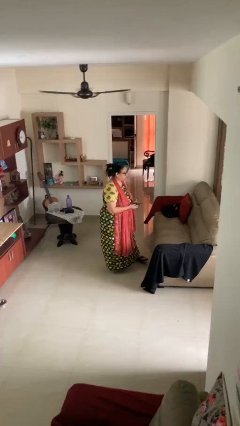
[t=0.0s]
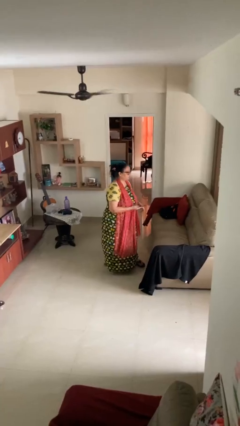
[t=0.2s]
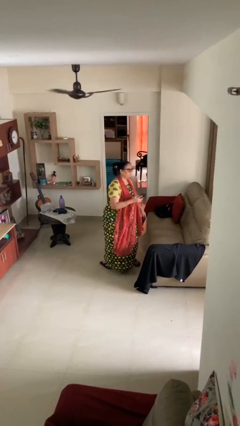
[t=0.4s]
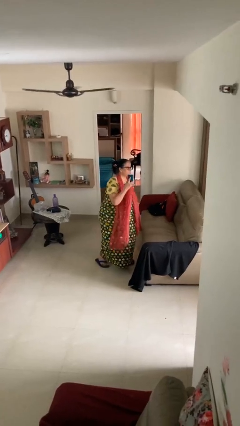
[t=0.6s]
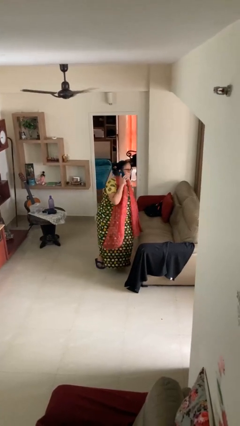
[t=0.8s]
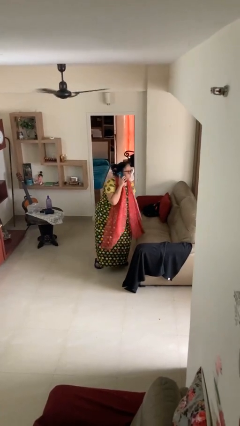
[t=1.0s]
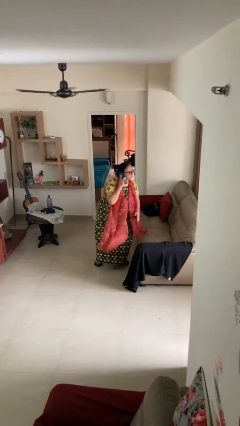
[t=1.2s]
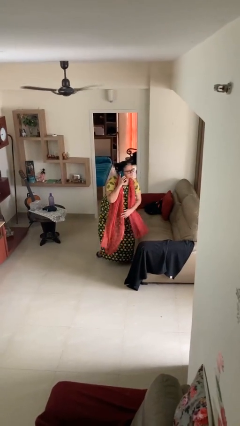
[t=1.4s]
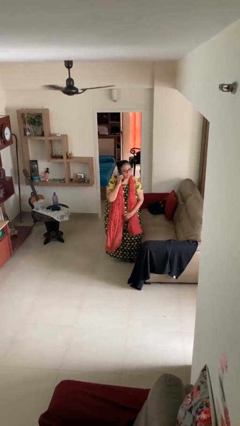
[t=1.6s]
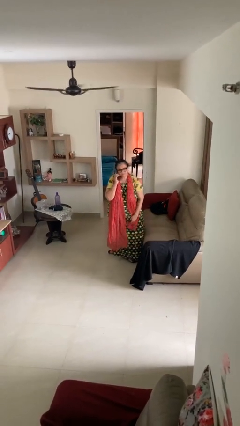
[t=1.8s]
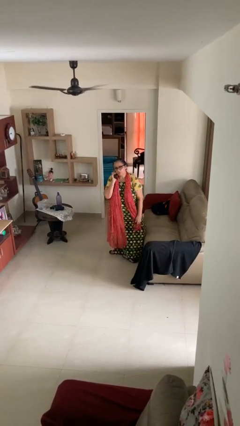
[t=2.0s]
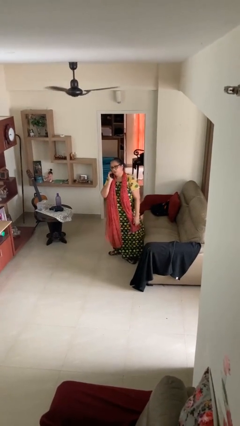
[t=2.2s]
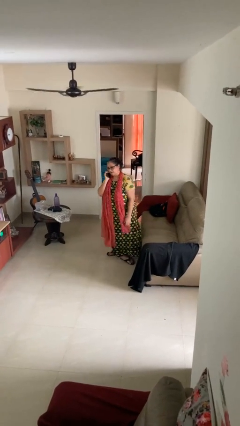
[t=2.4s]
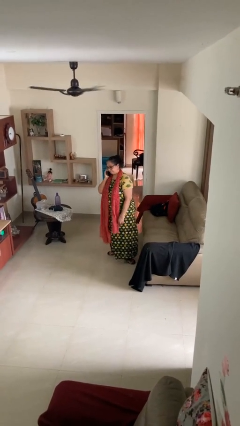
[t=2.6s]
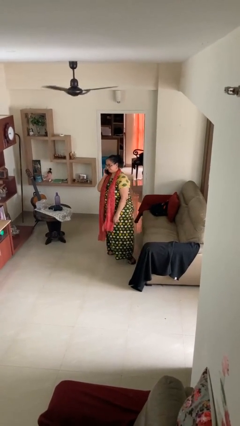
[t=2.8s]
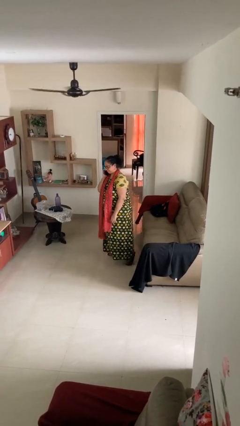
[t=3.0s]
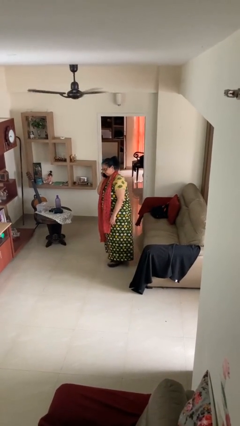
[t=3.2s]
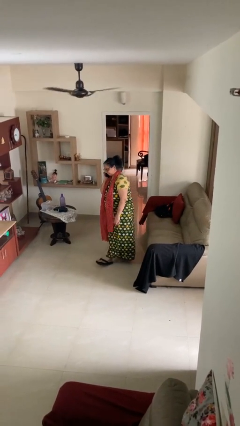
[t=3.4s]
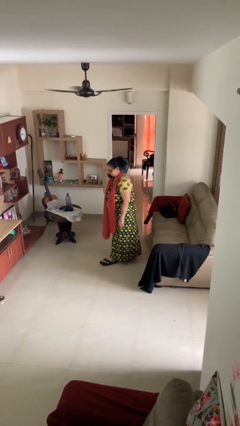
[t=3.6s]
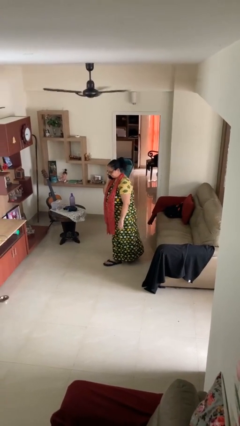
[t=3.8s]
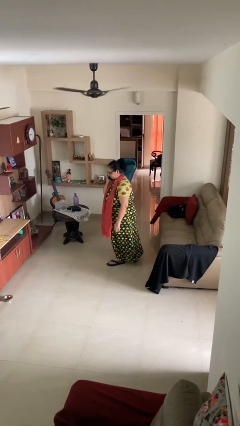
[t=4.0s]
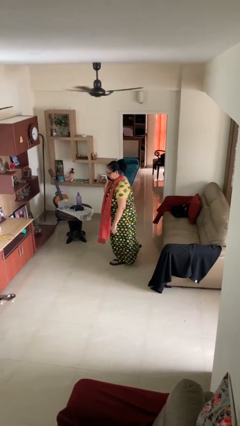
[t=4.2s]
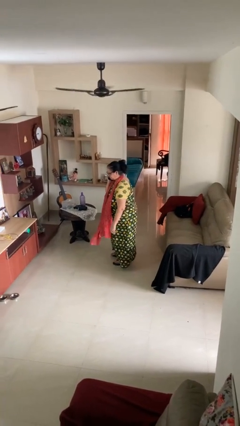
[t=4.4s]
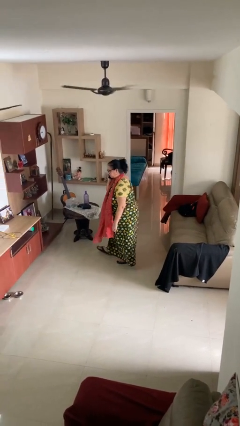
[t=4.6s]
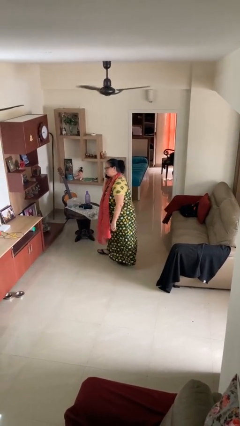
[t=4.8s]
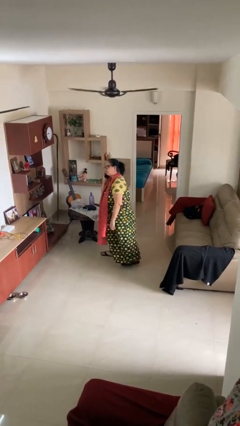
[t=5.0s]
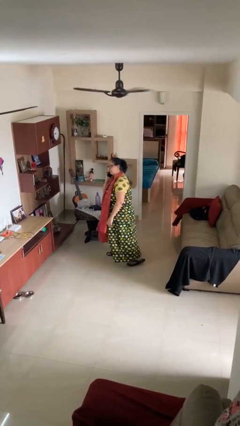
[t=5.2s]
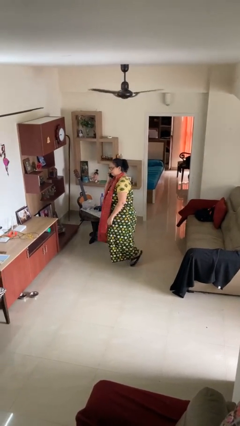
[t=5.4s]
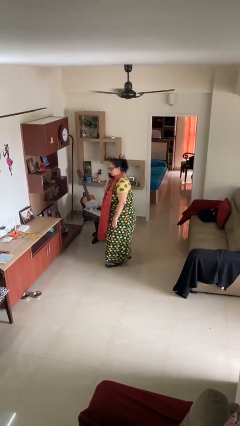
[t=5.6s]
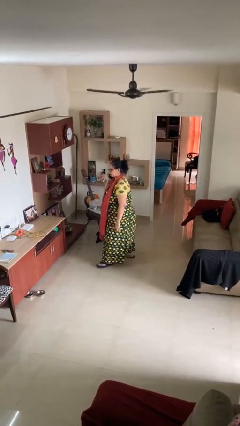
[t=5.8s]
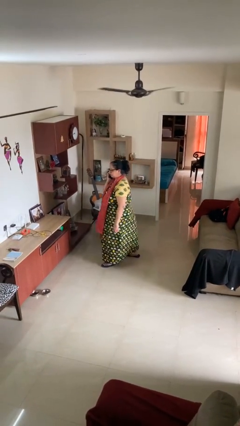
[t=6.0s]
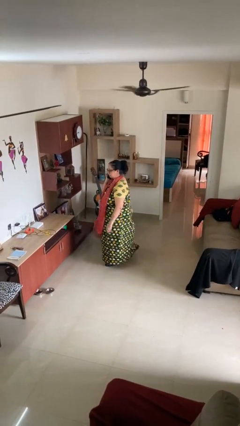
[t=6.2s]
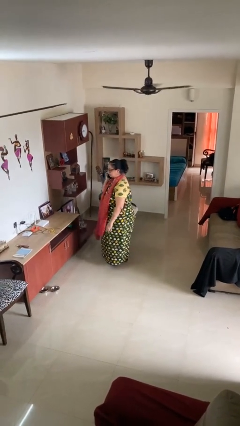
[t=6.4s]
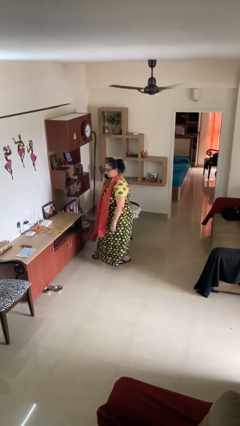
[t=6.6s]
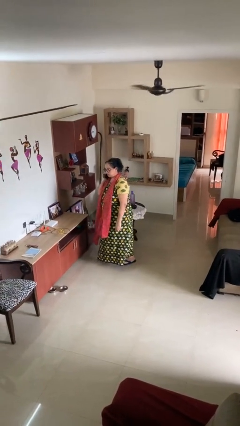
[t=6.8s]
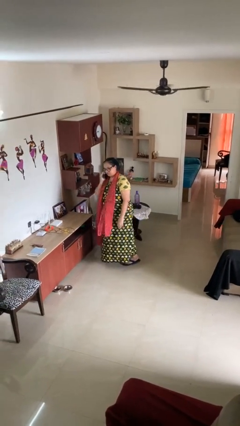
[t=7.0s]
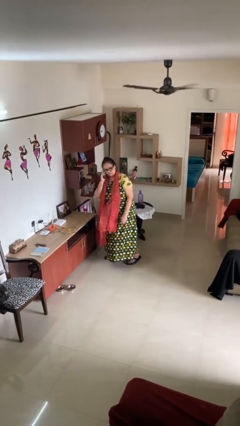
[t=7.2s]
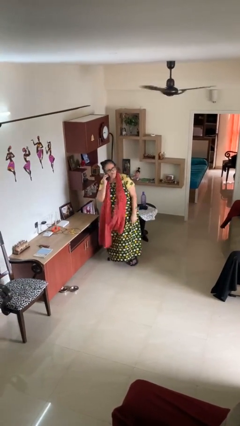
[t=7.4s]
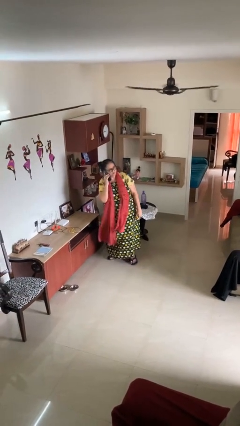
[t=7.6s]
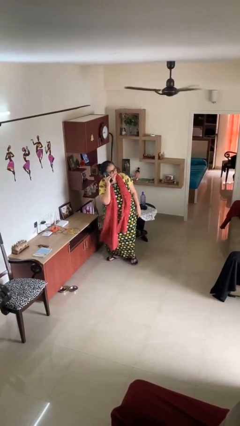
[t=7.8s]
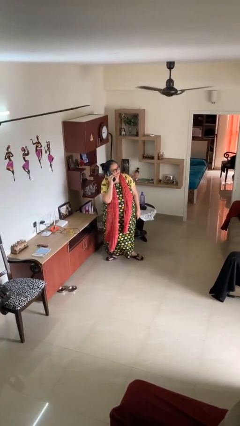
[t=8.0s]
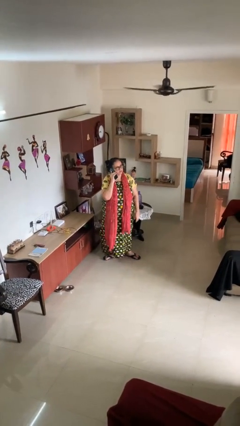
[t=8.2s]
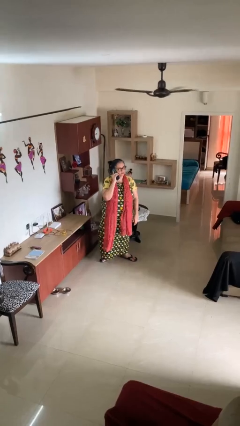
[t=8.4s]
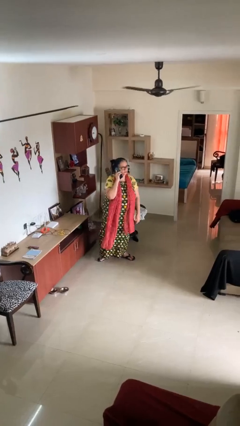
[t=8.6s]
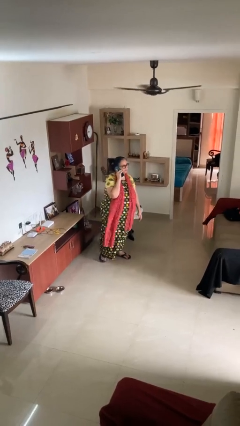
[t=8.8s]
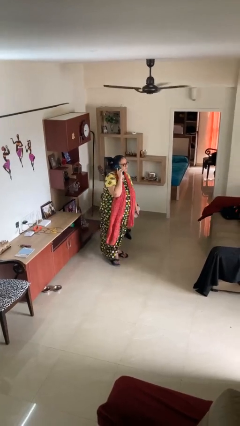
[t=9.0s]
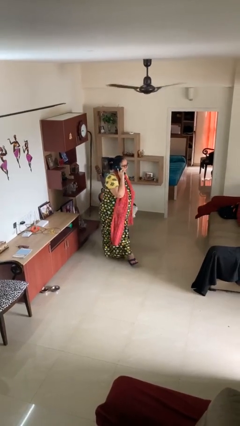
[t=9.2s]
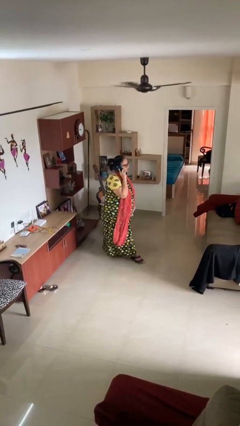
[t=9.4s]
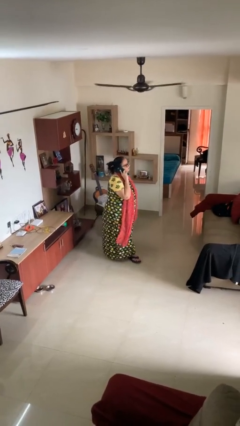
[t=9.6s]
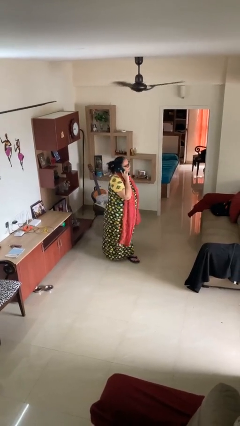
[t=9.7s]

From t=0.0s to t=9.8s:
person talks on phone

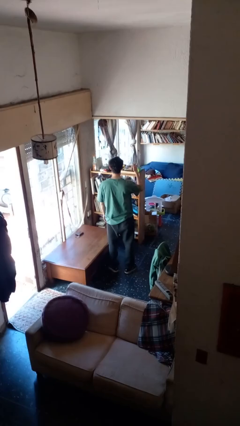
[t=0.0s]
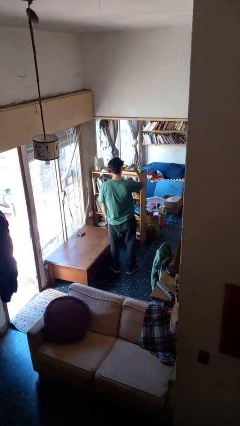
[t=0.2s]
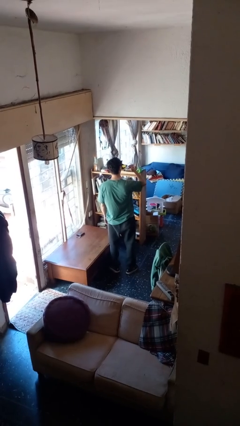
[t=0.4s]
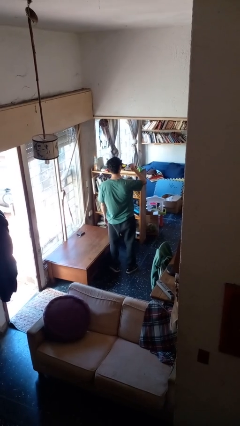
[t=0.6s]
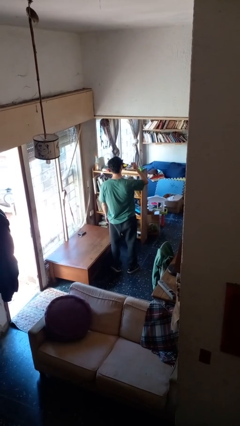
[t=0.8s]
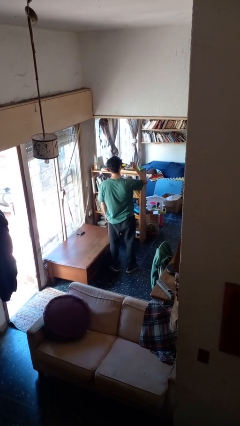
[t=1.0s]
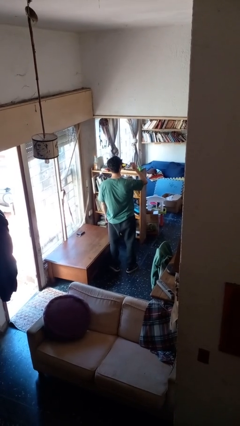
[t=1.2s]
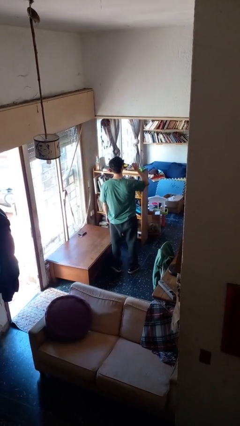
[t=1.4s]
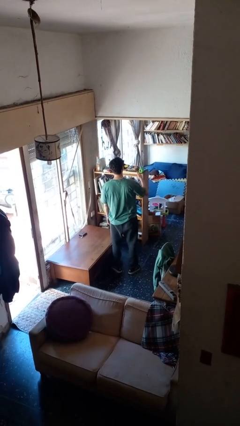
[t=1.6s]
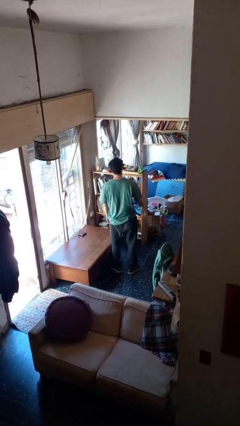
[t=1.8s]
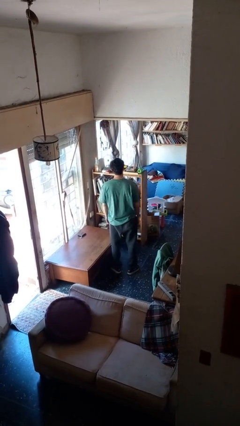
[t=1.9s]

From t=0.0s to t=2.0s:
person gestures behind me

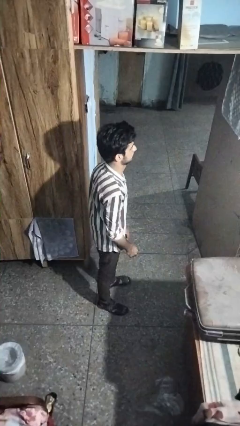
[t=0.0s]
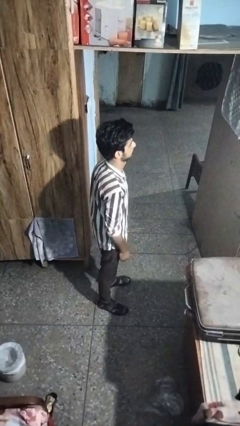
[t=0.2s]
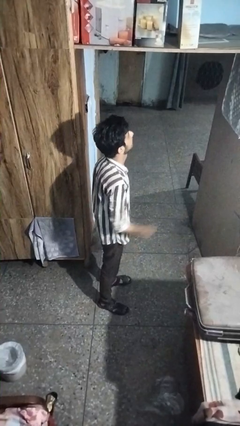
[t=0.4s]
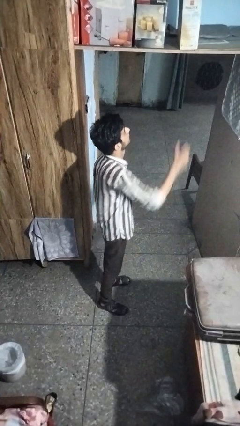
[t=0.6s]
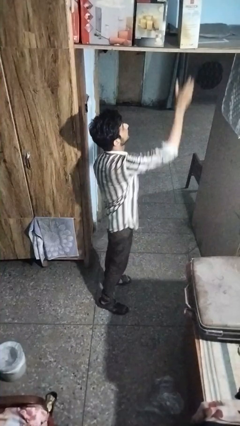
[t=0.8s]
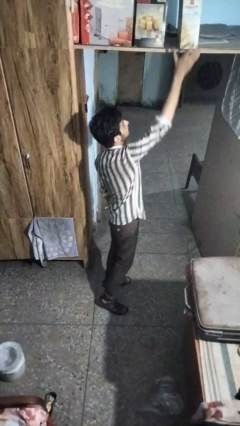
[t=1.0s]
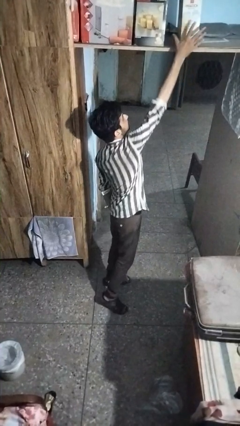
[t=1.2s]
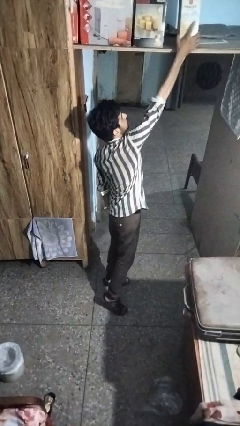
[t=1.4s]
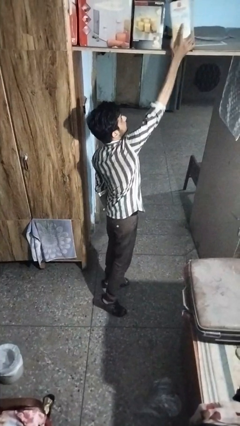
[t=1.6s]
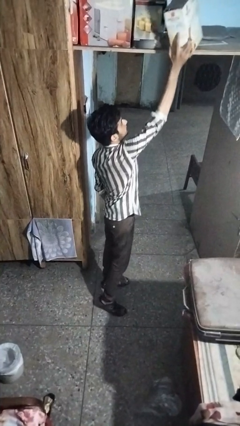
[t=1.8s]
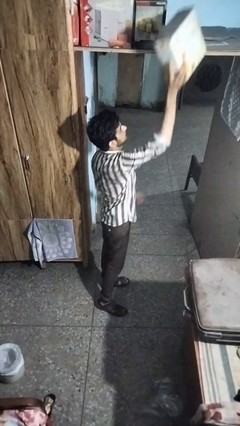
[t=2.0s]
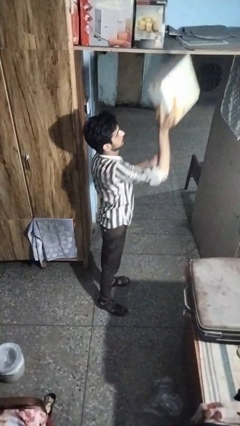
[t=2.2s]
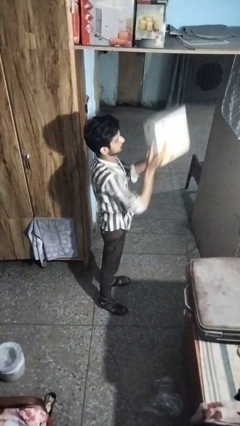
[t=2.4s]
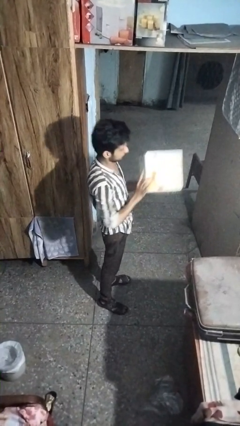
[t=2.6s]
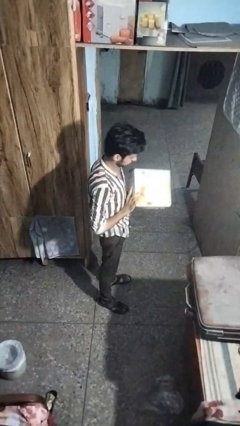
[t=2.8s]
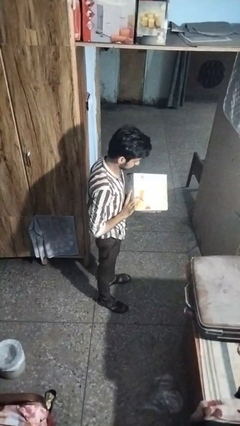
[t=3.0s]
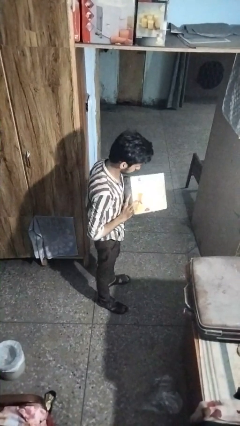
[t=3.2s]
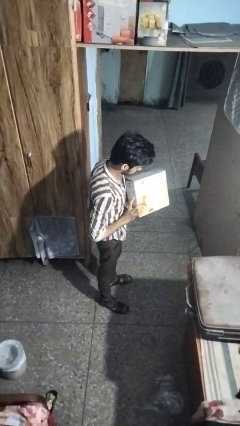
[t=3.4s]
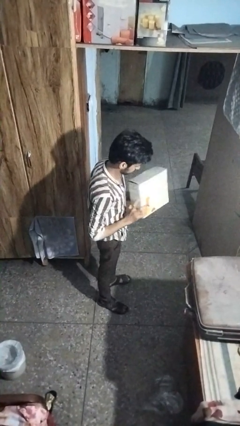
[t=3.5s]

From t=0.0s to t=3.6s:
person picks up object from shelf

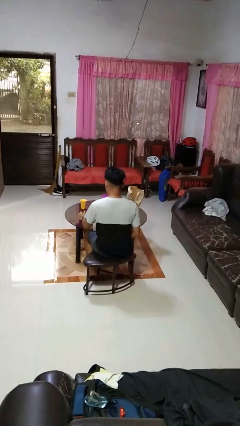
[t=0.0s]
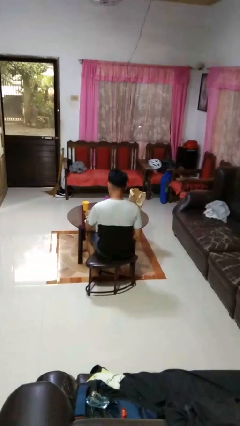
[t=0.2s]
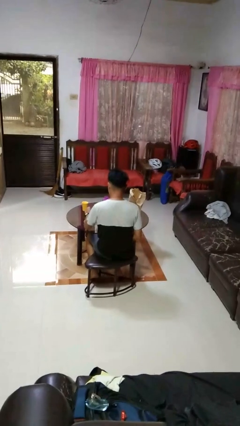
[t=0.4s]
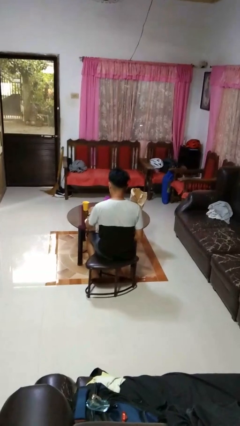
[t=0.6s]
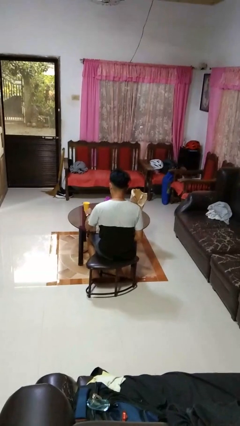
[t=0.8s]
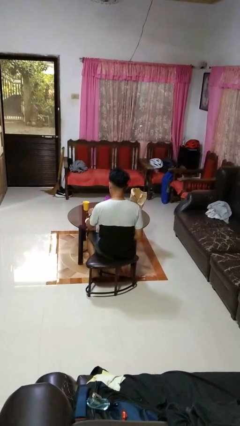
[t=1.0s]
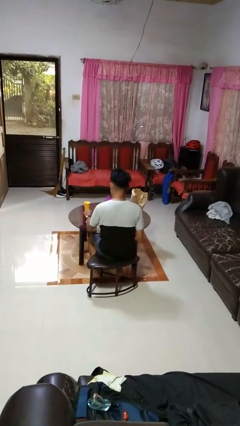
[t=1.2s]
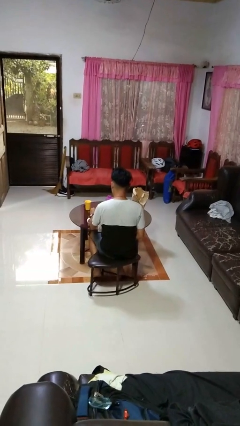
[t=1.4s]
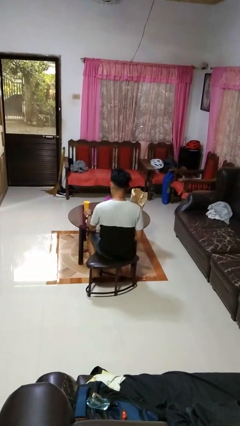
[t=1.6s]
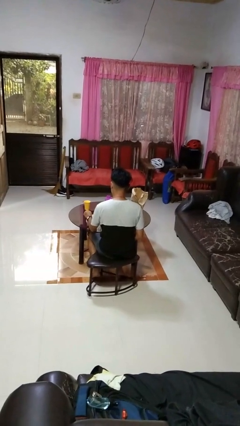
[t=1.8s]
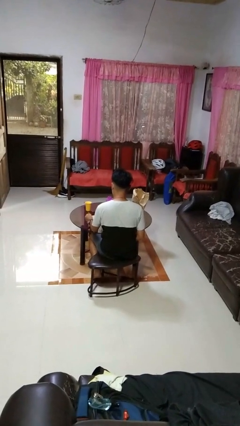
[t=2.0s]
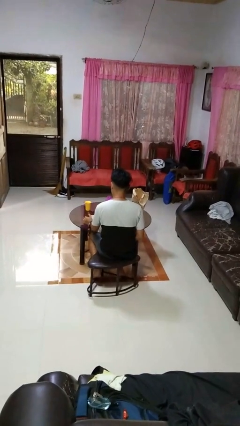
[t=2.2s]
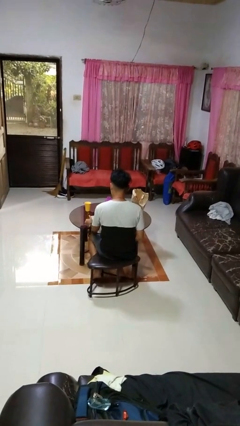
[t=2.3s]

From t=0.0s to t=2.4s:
person stirs mug
